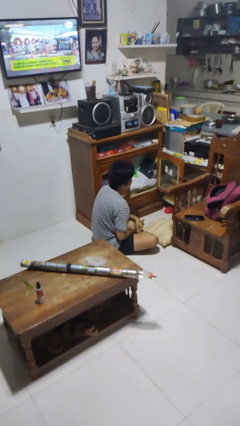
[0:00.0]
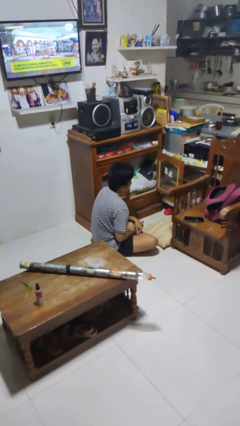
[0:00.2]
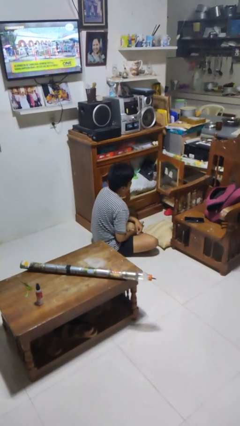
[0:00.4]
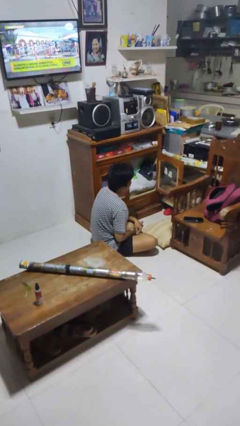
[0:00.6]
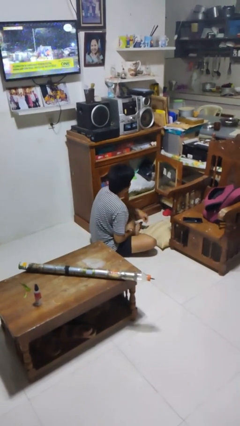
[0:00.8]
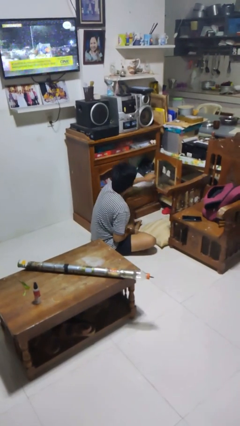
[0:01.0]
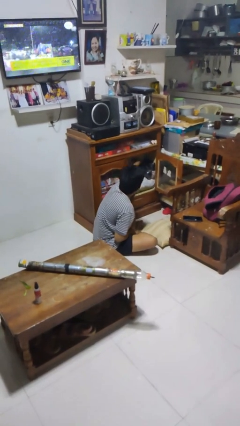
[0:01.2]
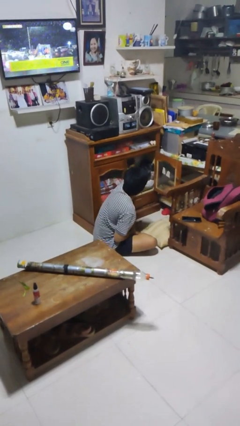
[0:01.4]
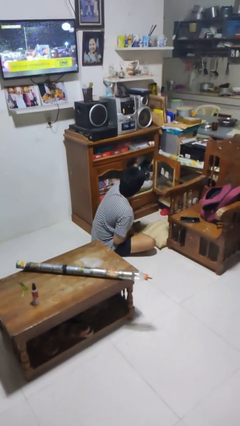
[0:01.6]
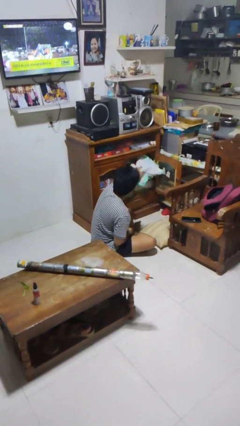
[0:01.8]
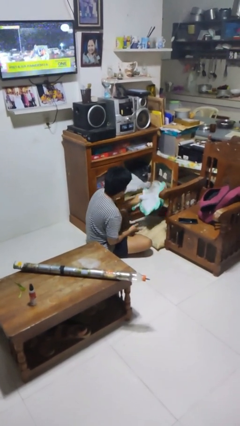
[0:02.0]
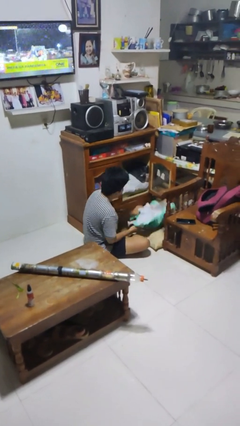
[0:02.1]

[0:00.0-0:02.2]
person puts clothes into dresser

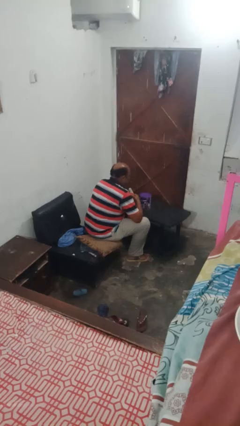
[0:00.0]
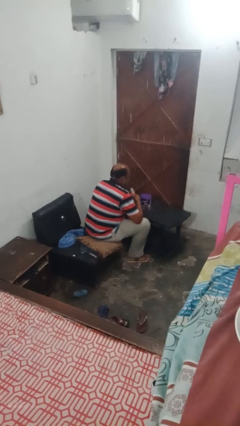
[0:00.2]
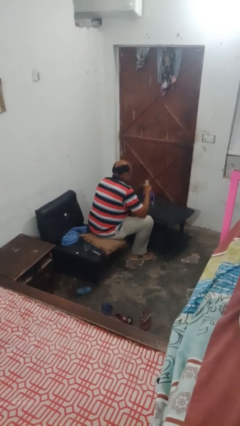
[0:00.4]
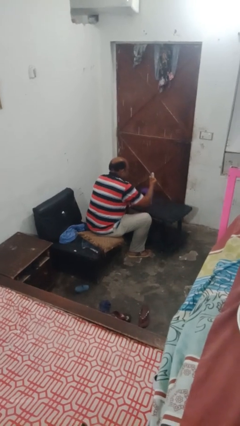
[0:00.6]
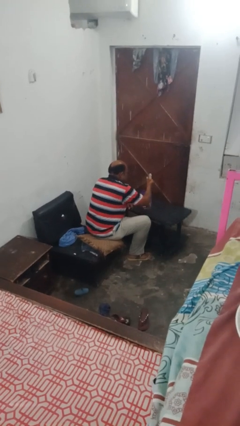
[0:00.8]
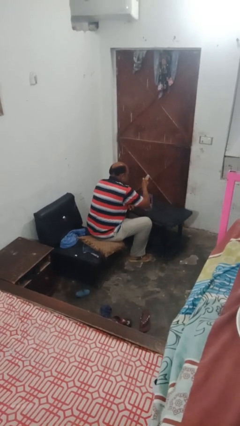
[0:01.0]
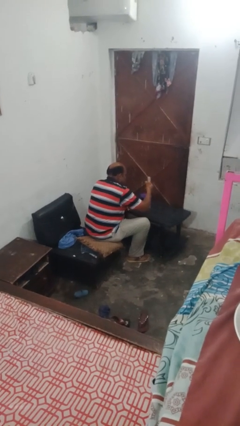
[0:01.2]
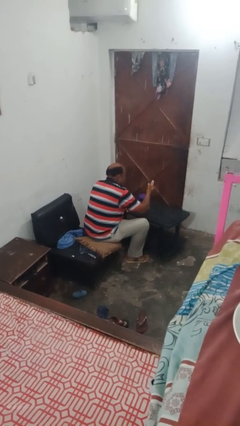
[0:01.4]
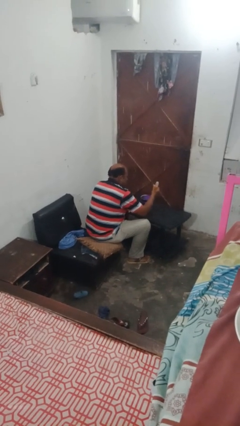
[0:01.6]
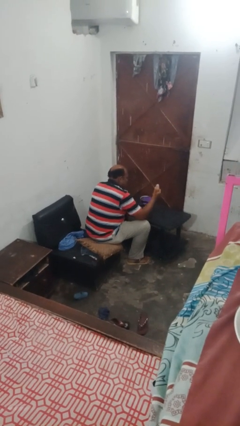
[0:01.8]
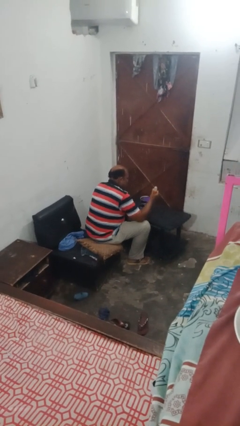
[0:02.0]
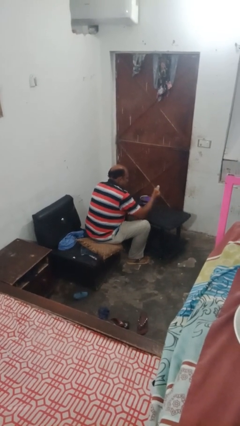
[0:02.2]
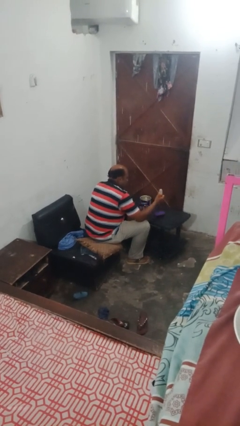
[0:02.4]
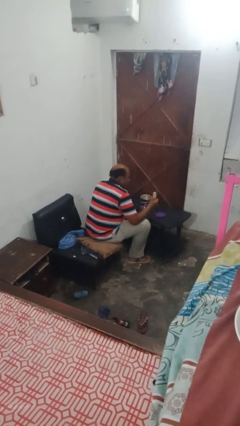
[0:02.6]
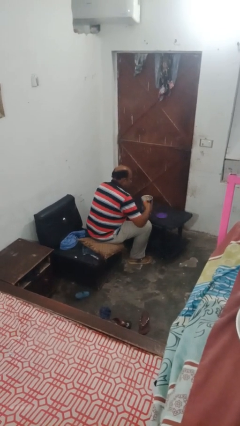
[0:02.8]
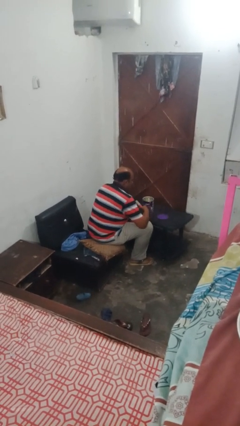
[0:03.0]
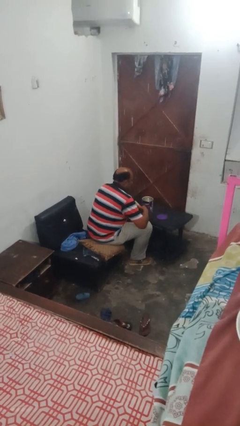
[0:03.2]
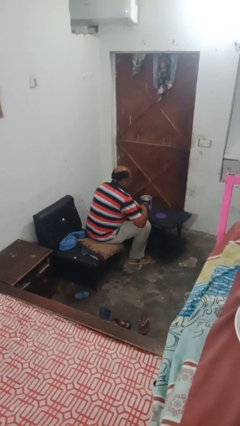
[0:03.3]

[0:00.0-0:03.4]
person opens can with can opener

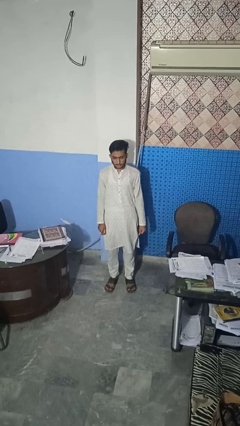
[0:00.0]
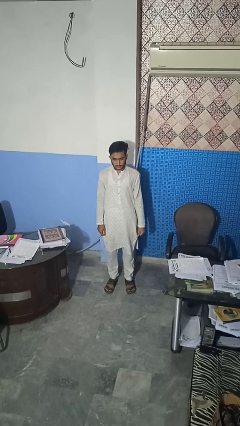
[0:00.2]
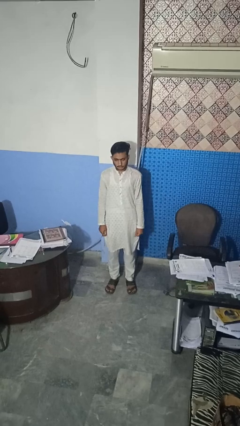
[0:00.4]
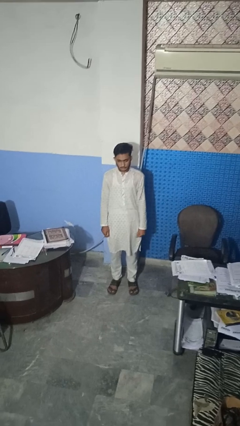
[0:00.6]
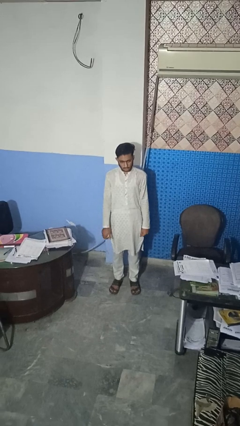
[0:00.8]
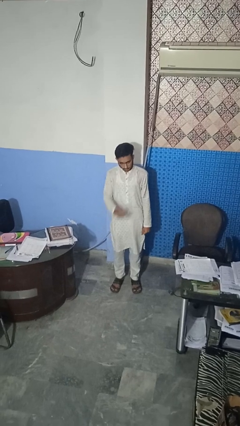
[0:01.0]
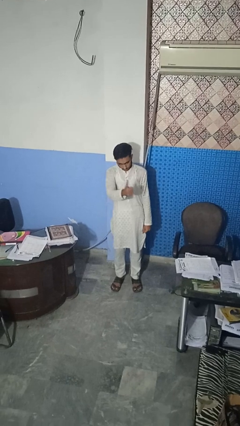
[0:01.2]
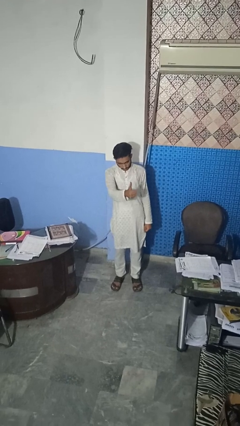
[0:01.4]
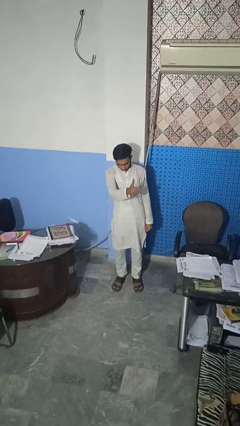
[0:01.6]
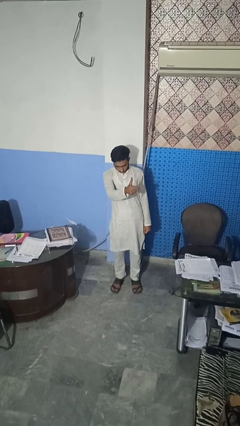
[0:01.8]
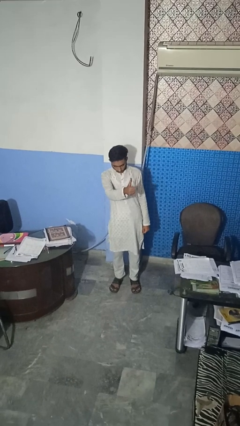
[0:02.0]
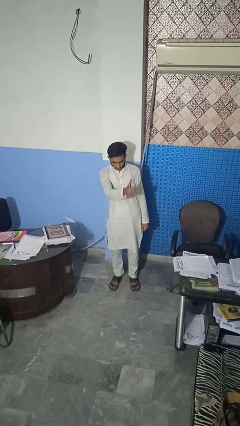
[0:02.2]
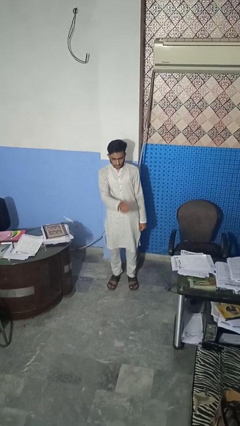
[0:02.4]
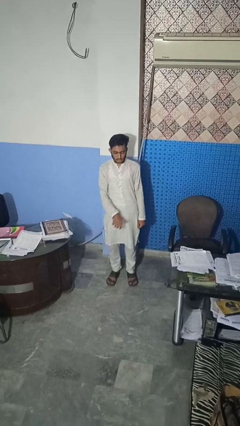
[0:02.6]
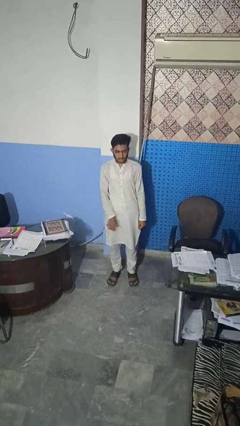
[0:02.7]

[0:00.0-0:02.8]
person gestures thumbs up

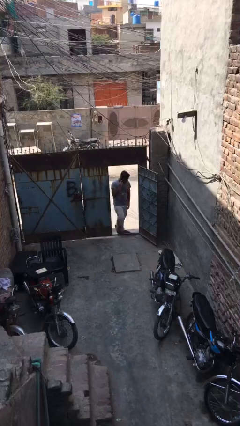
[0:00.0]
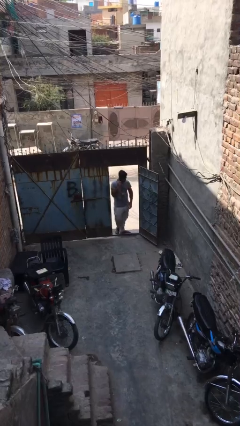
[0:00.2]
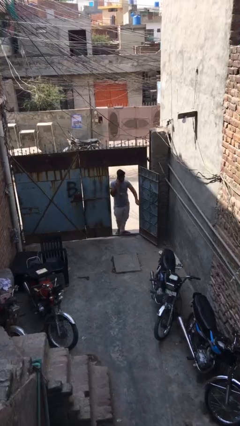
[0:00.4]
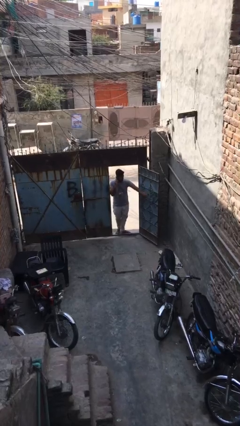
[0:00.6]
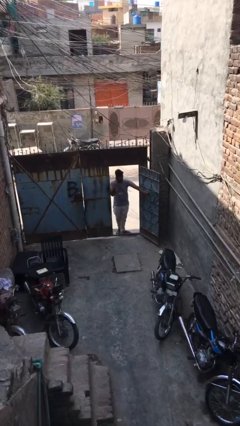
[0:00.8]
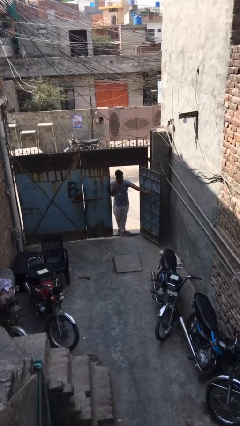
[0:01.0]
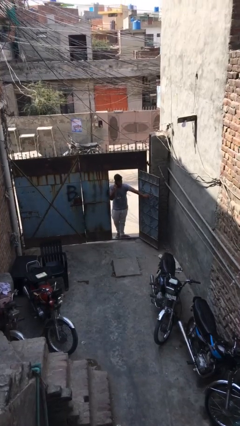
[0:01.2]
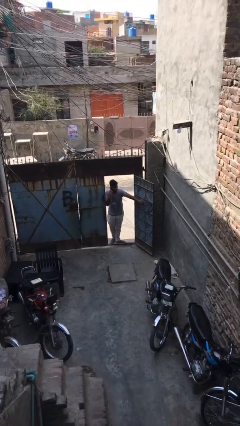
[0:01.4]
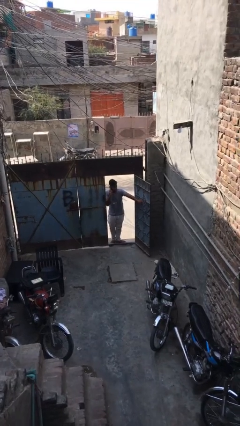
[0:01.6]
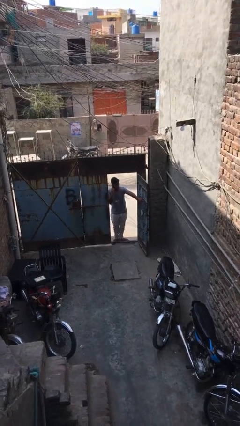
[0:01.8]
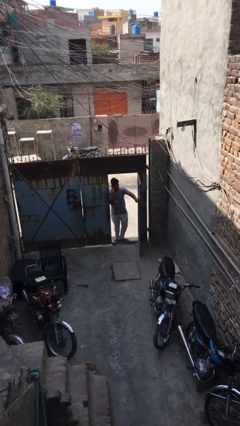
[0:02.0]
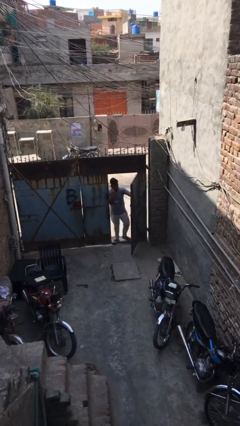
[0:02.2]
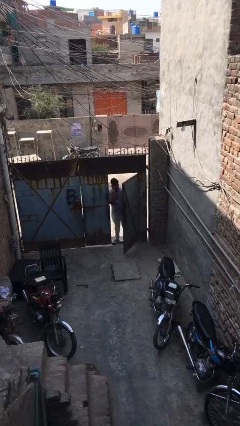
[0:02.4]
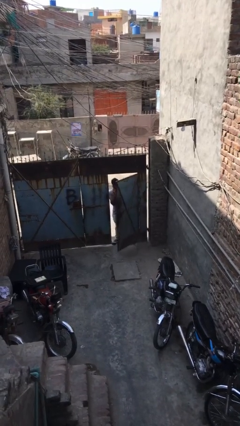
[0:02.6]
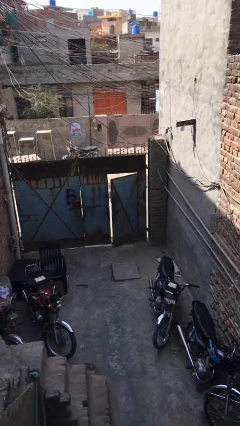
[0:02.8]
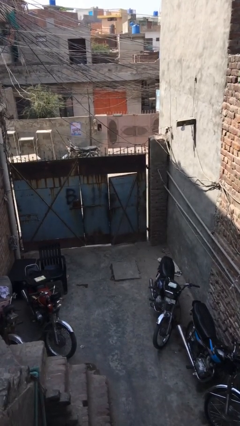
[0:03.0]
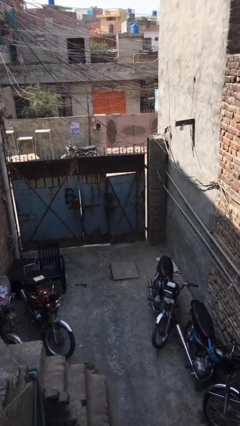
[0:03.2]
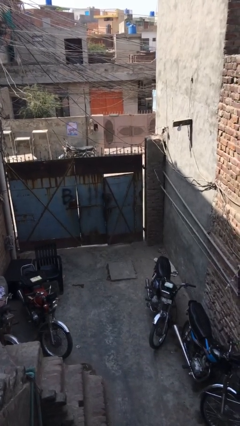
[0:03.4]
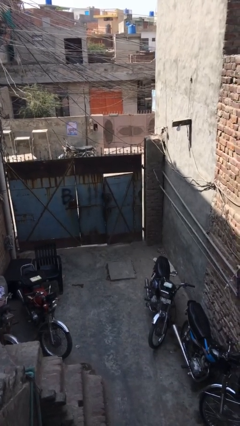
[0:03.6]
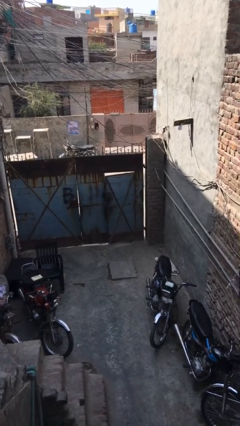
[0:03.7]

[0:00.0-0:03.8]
person closes facility door

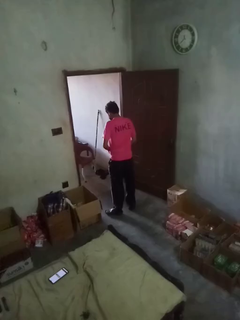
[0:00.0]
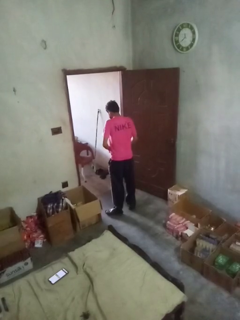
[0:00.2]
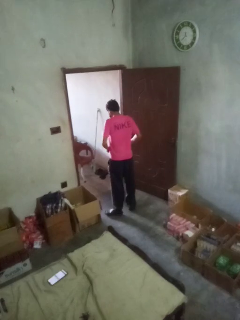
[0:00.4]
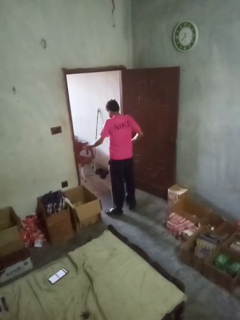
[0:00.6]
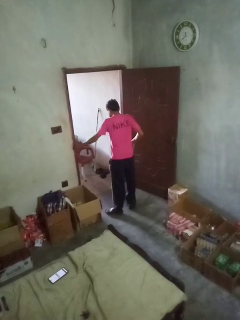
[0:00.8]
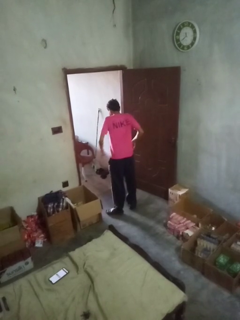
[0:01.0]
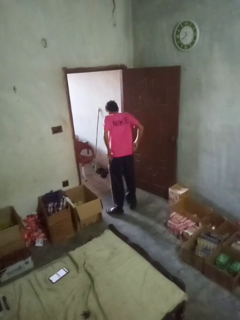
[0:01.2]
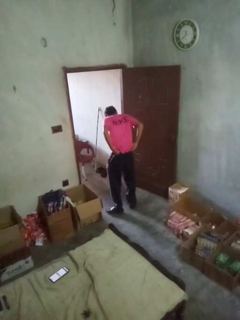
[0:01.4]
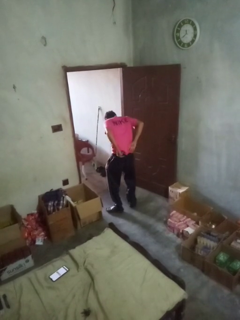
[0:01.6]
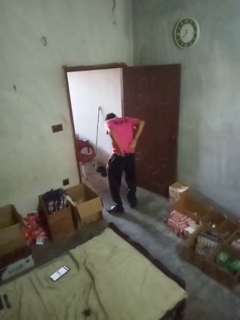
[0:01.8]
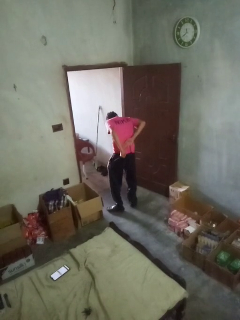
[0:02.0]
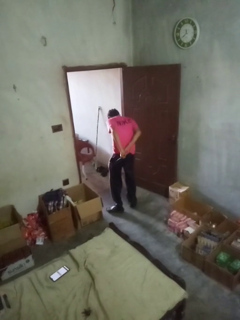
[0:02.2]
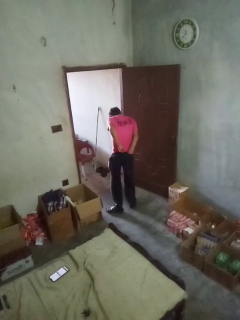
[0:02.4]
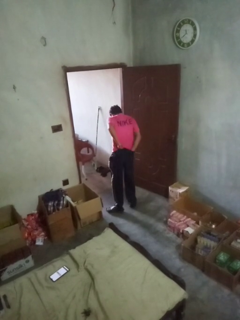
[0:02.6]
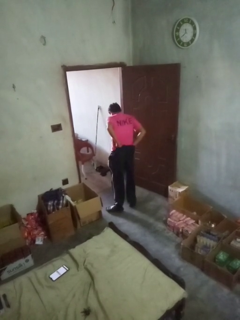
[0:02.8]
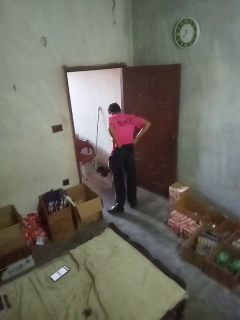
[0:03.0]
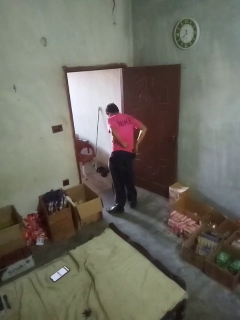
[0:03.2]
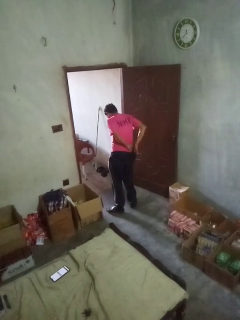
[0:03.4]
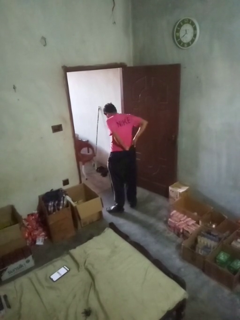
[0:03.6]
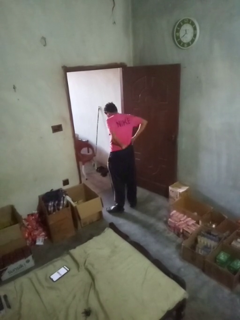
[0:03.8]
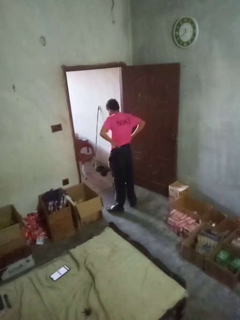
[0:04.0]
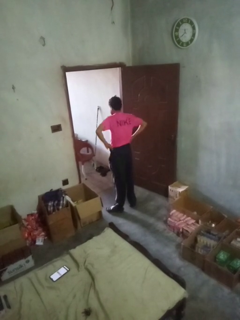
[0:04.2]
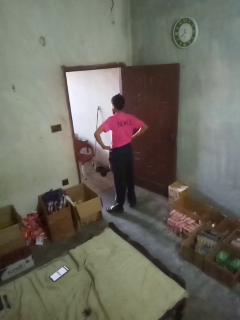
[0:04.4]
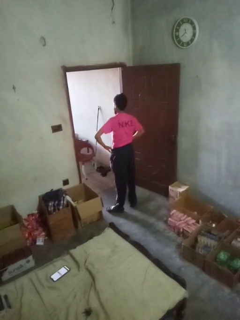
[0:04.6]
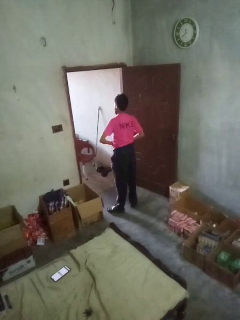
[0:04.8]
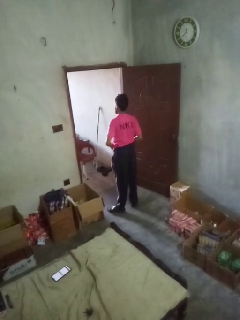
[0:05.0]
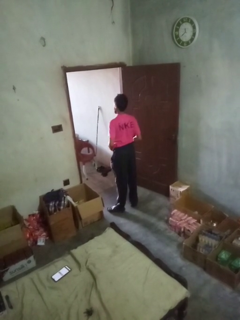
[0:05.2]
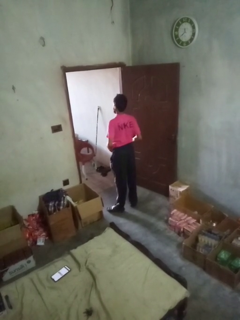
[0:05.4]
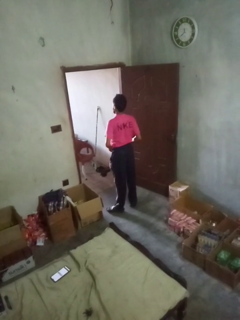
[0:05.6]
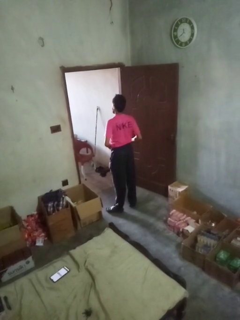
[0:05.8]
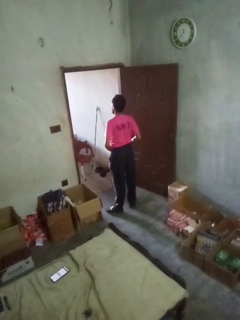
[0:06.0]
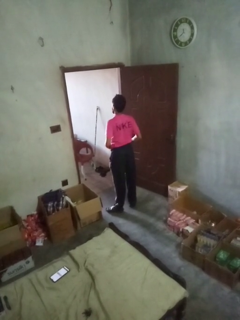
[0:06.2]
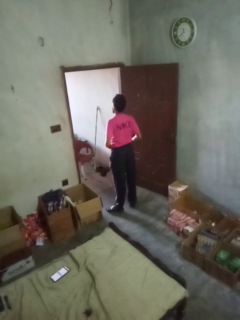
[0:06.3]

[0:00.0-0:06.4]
person tucks in shirt

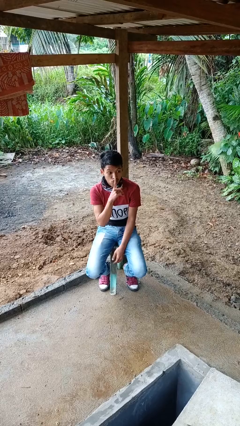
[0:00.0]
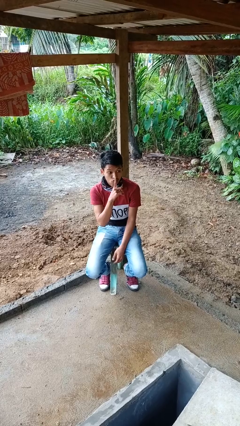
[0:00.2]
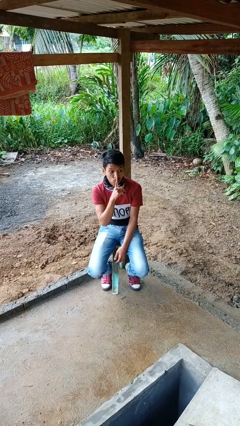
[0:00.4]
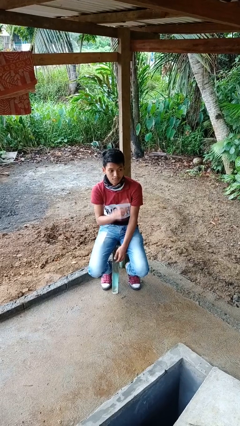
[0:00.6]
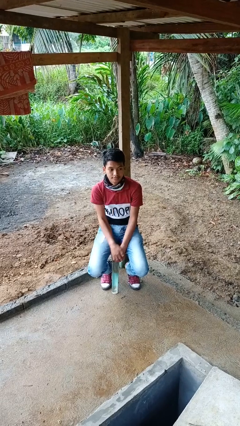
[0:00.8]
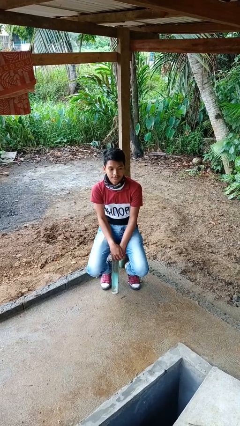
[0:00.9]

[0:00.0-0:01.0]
person gestures be quiet
